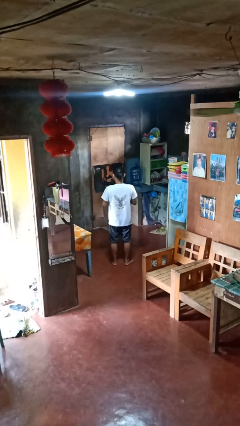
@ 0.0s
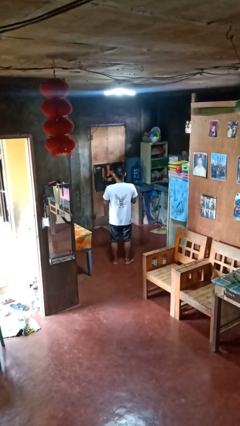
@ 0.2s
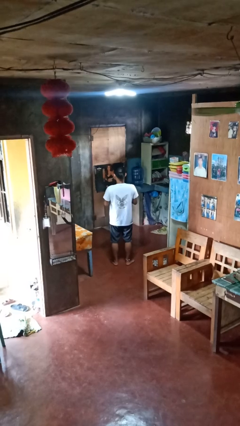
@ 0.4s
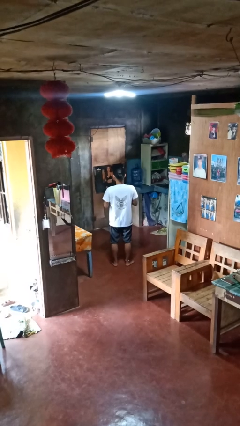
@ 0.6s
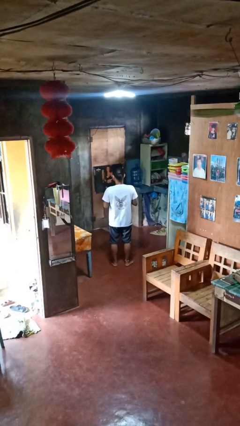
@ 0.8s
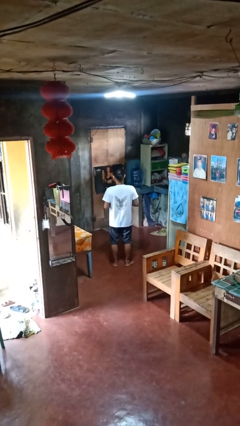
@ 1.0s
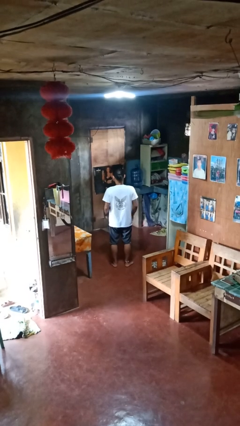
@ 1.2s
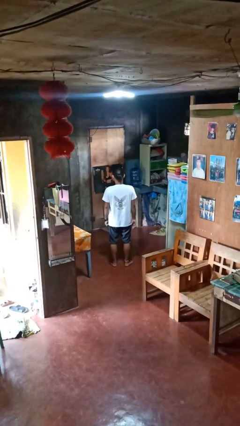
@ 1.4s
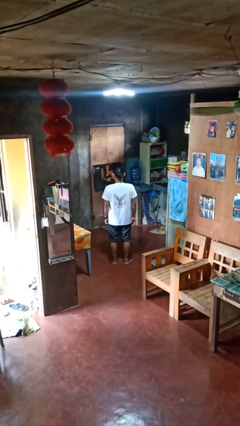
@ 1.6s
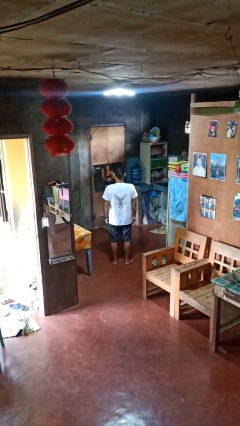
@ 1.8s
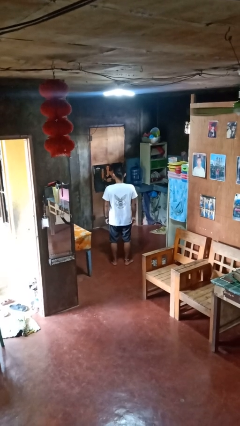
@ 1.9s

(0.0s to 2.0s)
person buttons shirt

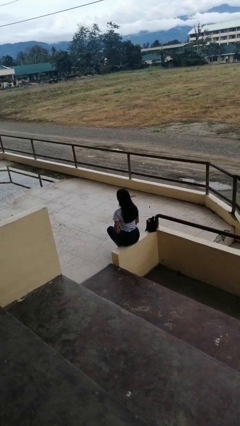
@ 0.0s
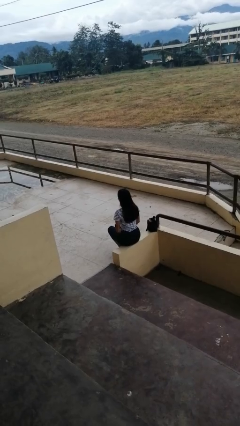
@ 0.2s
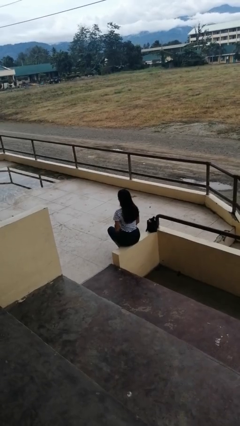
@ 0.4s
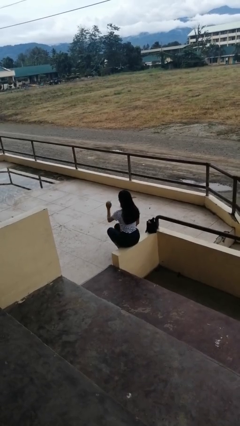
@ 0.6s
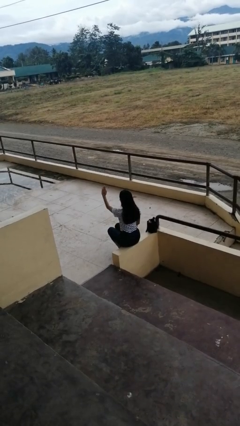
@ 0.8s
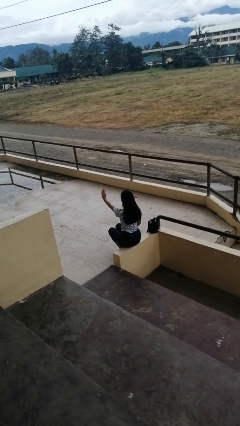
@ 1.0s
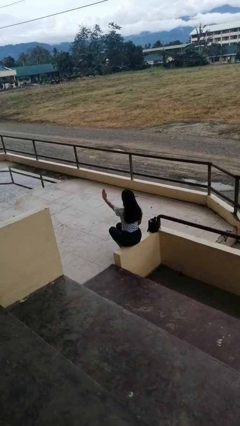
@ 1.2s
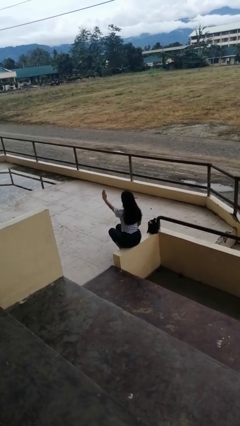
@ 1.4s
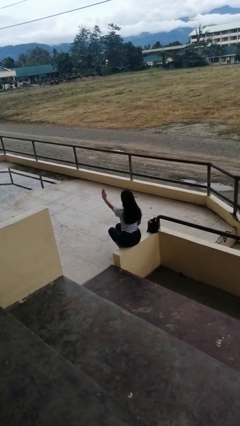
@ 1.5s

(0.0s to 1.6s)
person gestures stop

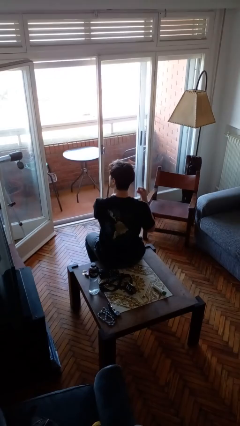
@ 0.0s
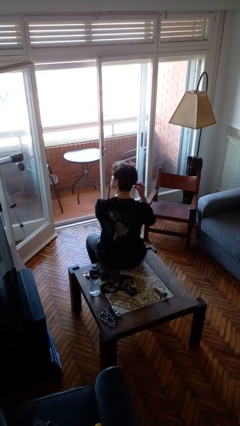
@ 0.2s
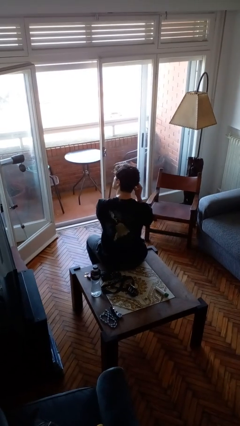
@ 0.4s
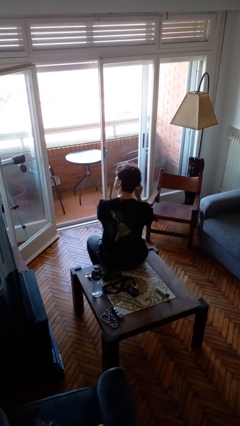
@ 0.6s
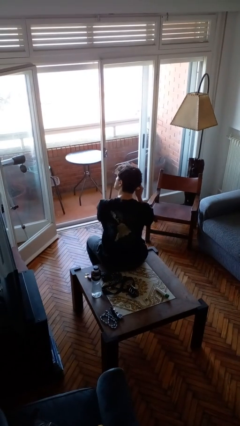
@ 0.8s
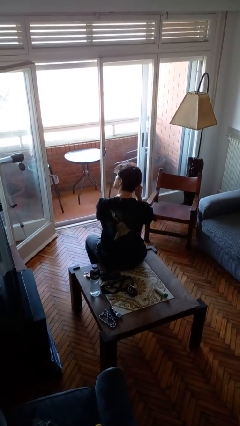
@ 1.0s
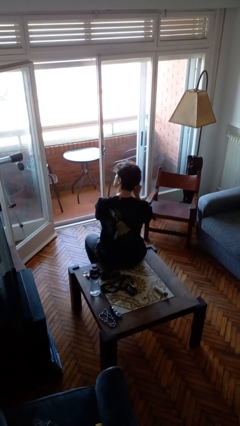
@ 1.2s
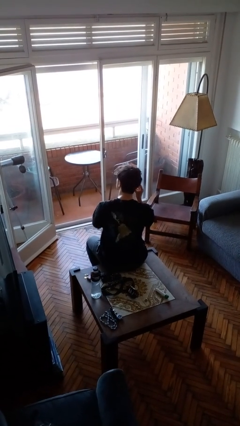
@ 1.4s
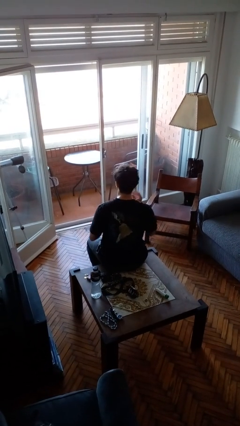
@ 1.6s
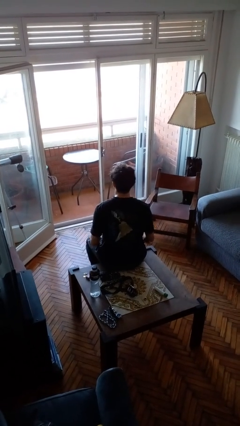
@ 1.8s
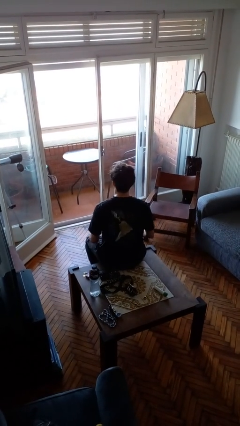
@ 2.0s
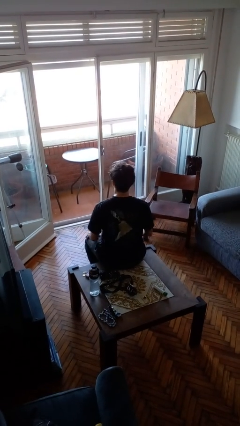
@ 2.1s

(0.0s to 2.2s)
person puts on earrings

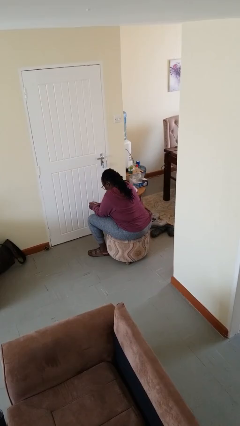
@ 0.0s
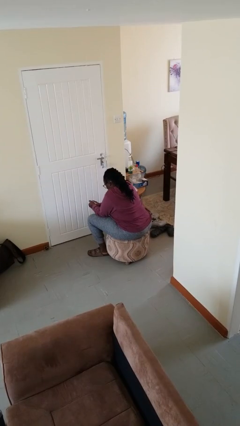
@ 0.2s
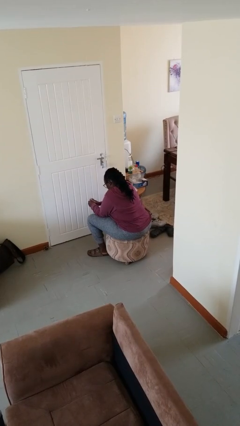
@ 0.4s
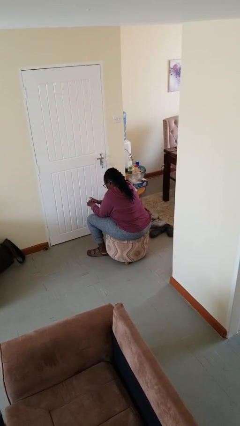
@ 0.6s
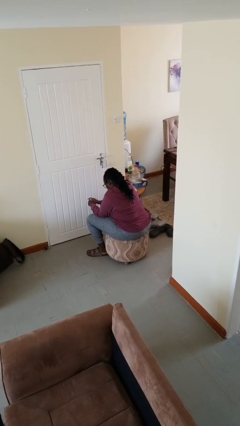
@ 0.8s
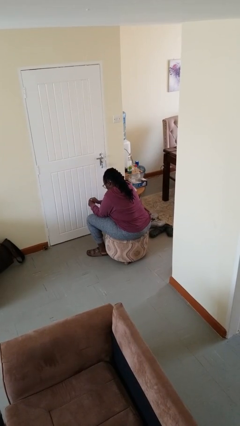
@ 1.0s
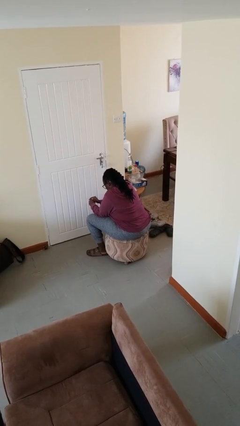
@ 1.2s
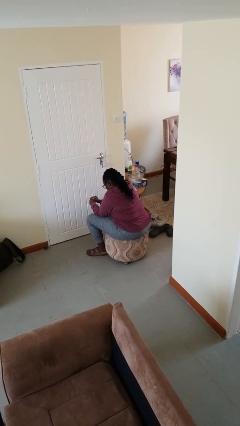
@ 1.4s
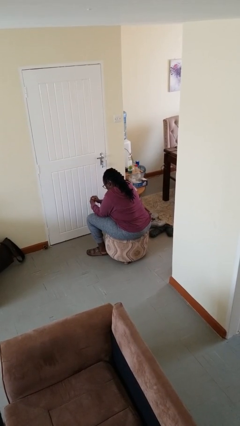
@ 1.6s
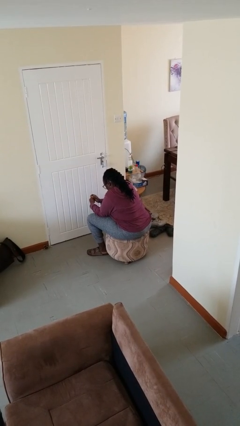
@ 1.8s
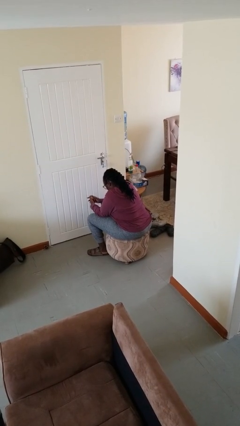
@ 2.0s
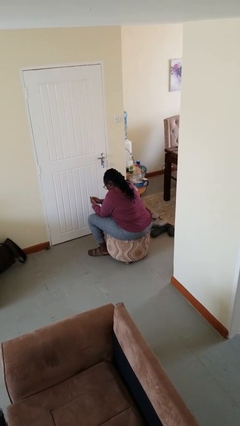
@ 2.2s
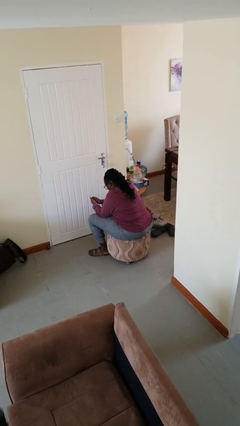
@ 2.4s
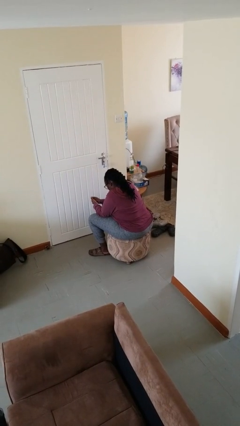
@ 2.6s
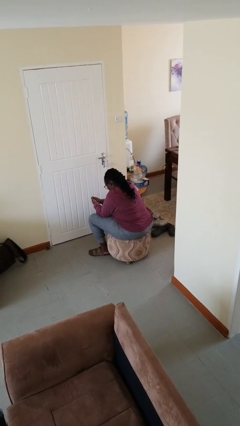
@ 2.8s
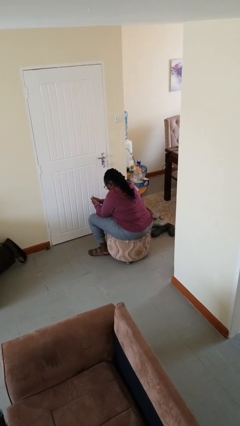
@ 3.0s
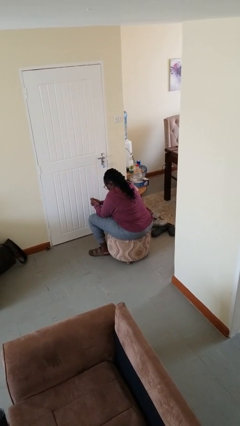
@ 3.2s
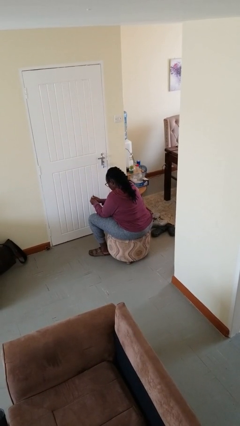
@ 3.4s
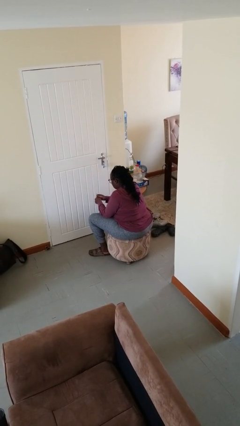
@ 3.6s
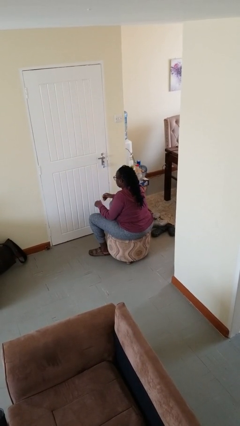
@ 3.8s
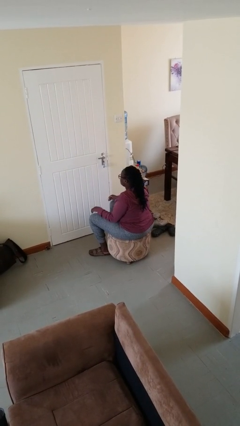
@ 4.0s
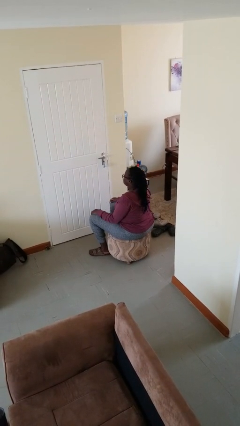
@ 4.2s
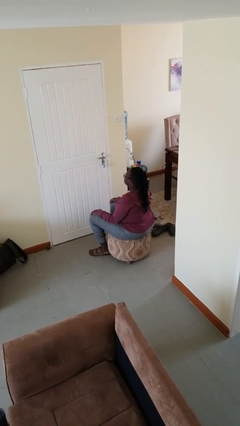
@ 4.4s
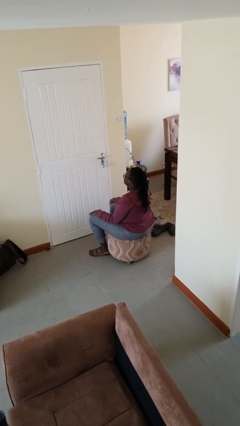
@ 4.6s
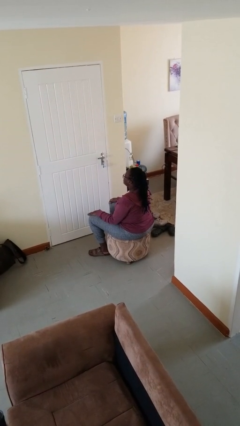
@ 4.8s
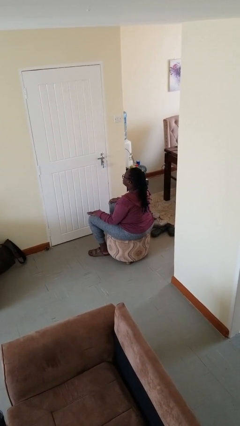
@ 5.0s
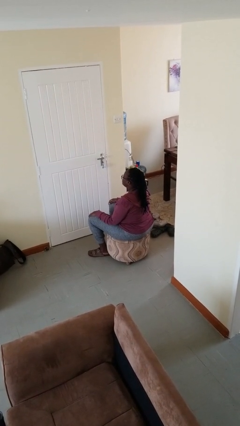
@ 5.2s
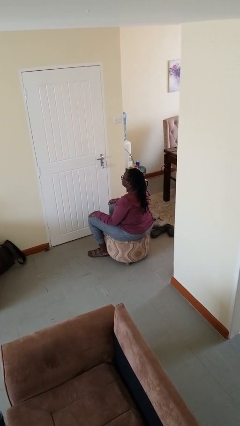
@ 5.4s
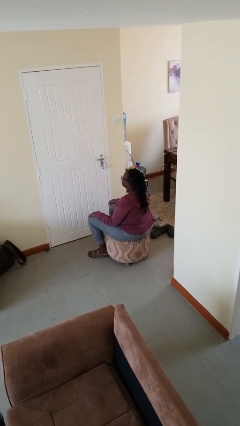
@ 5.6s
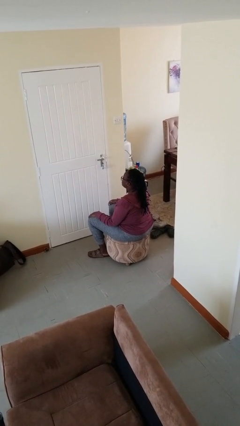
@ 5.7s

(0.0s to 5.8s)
person looks at hands in lap

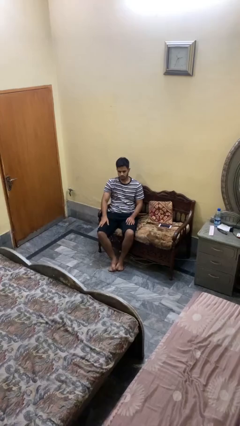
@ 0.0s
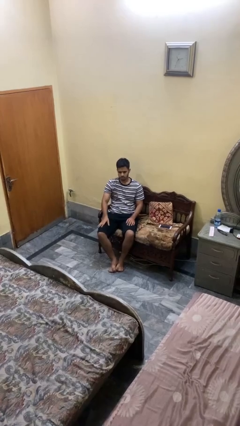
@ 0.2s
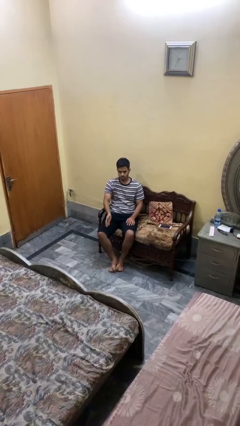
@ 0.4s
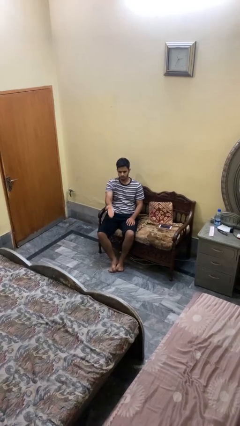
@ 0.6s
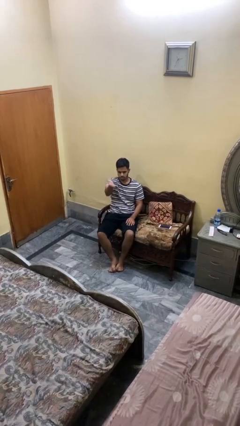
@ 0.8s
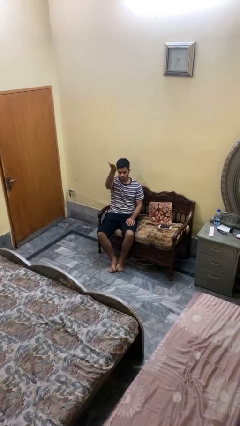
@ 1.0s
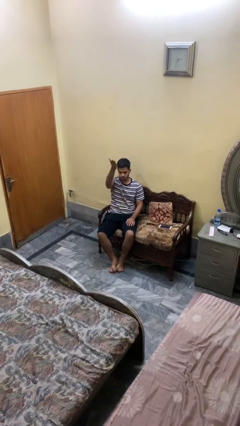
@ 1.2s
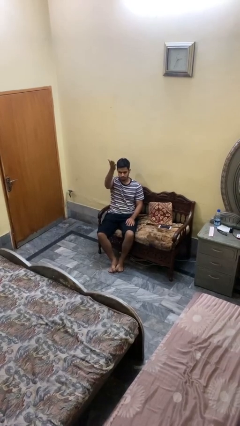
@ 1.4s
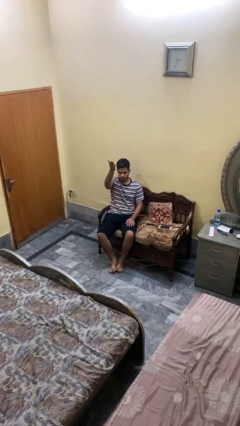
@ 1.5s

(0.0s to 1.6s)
person gestures swipe up

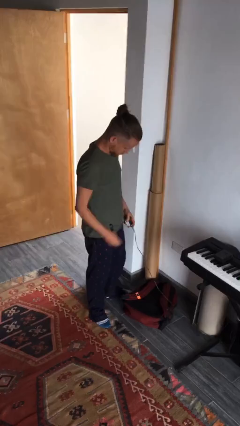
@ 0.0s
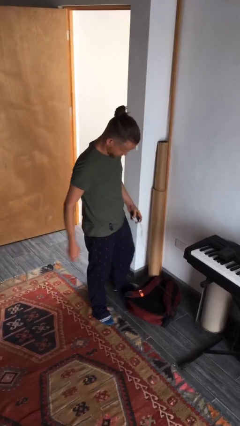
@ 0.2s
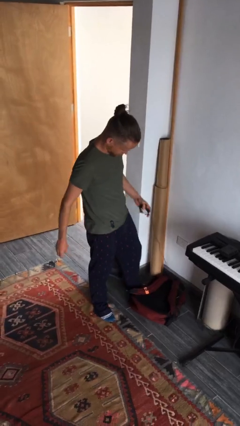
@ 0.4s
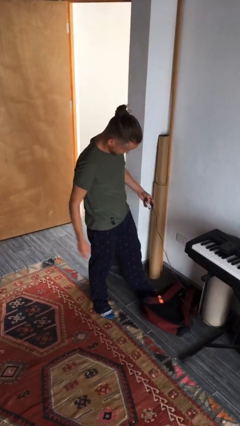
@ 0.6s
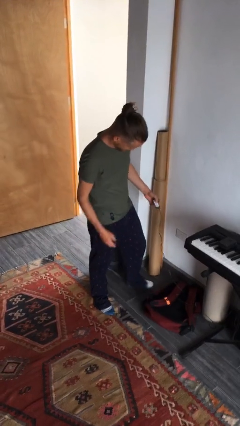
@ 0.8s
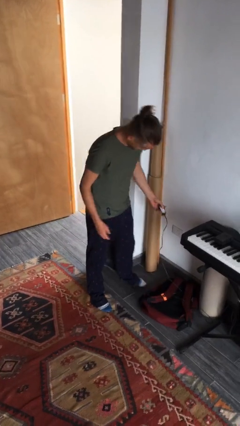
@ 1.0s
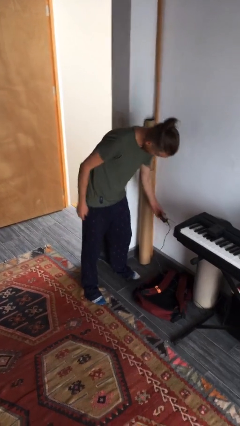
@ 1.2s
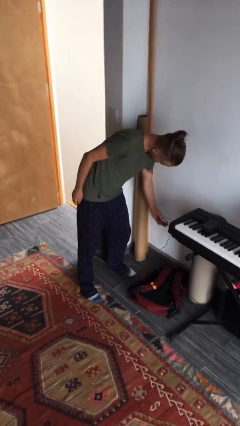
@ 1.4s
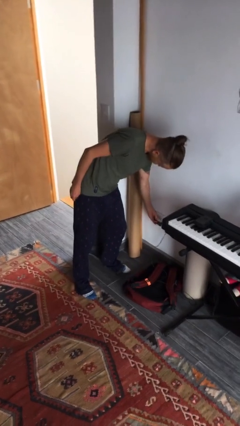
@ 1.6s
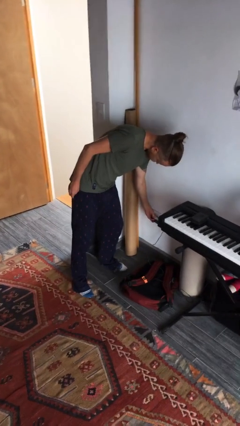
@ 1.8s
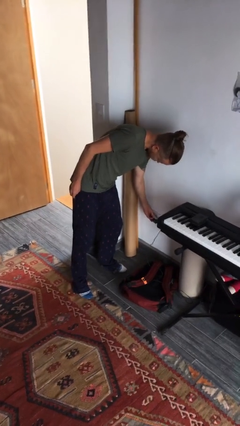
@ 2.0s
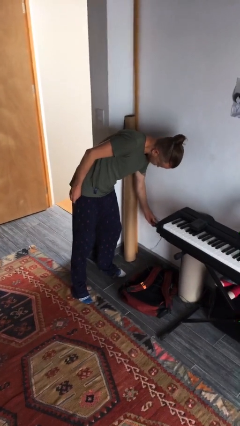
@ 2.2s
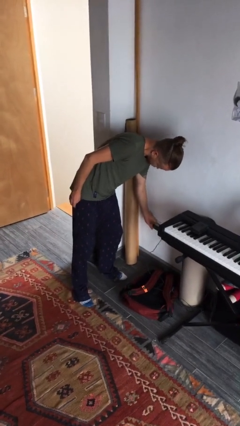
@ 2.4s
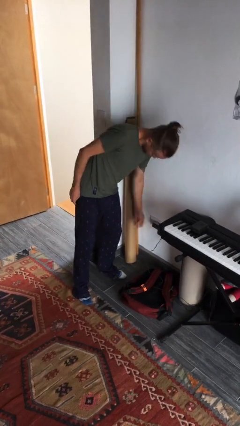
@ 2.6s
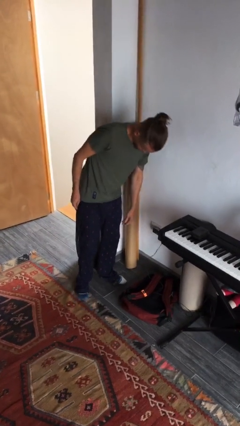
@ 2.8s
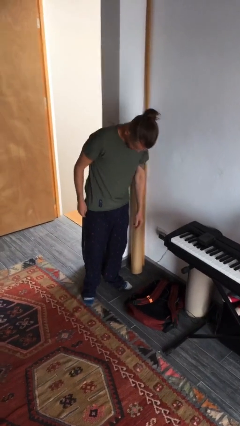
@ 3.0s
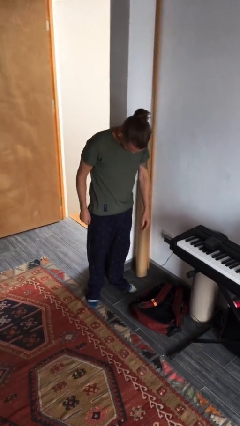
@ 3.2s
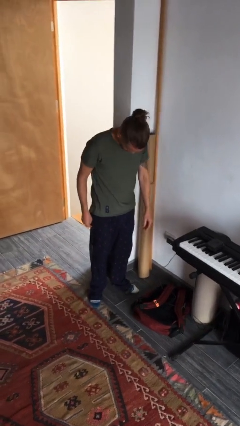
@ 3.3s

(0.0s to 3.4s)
person plugs into electrical socket

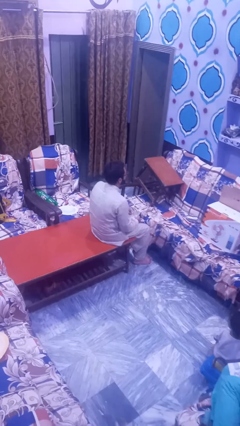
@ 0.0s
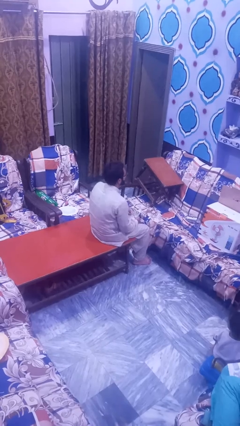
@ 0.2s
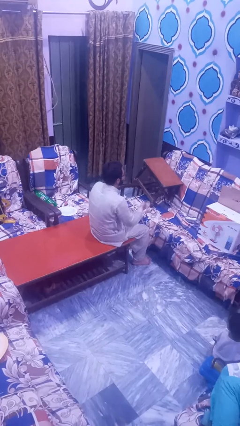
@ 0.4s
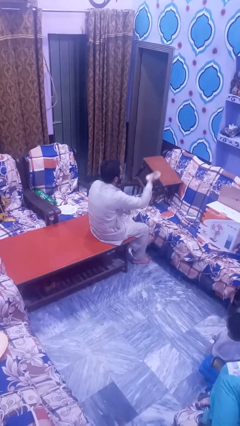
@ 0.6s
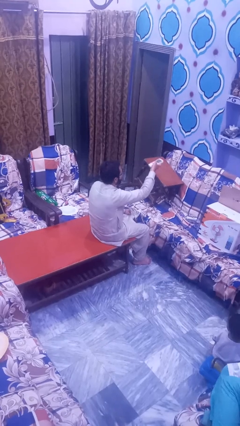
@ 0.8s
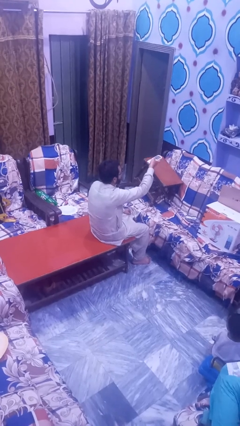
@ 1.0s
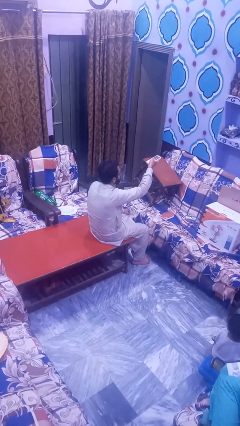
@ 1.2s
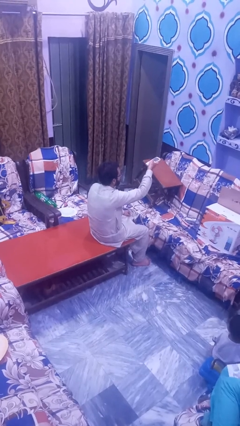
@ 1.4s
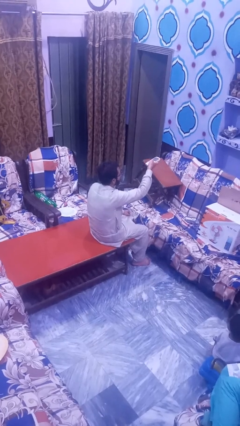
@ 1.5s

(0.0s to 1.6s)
person uses television remote
